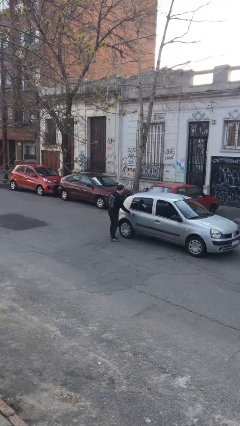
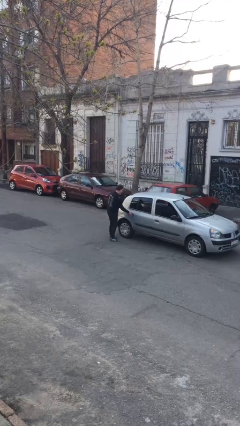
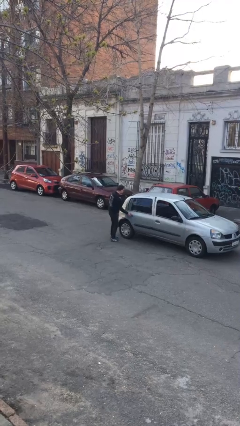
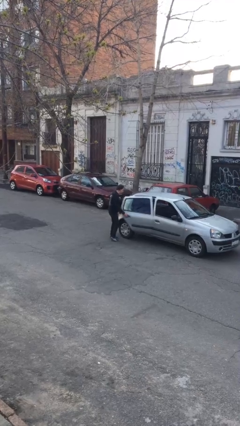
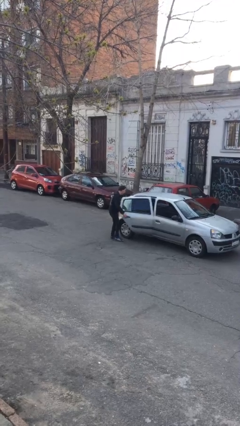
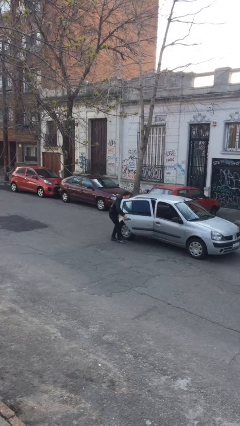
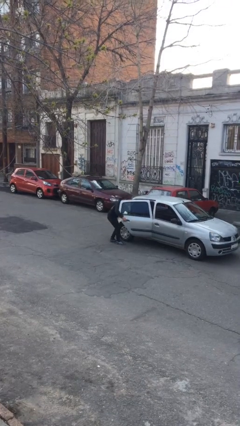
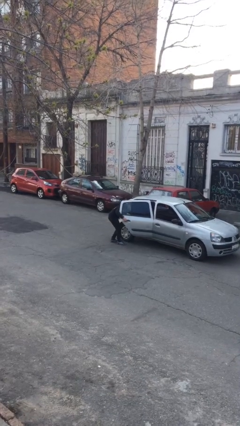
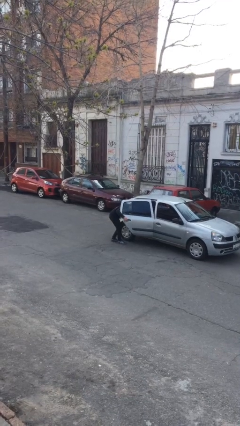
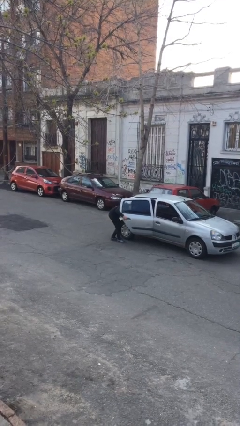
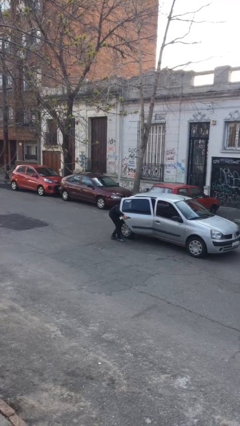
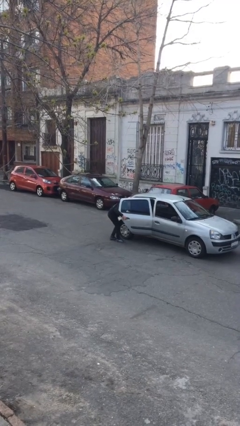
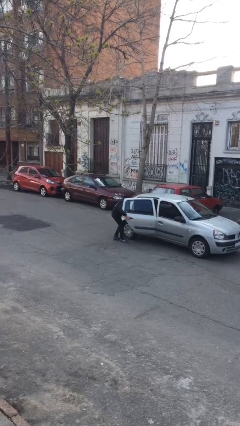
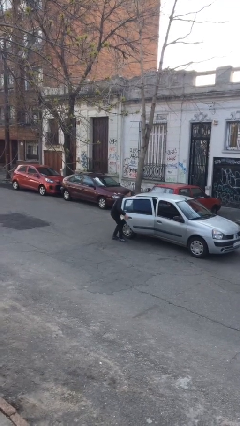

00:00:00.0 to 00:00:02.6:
person opens car door

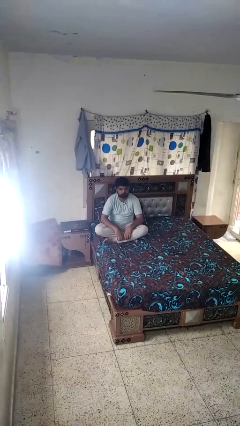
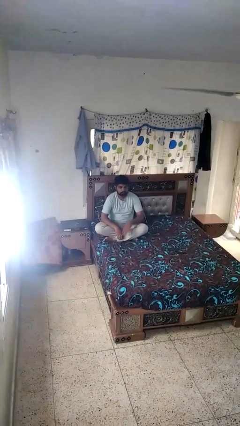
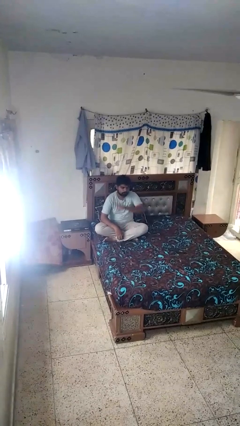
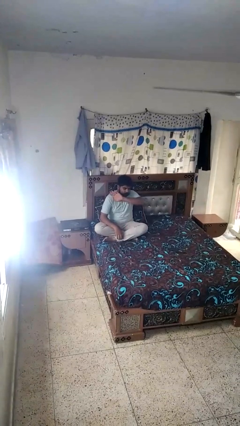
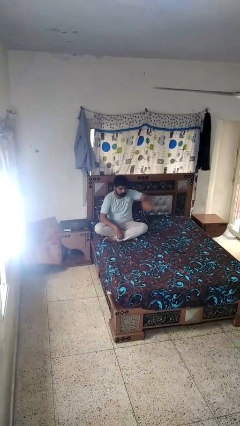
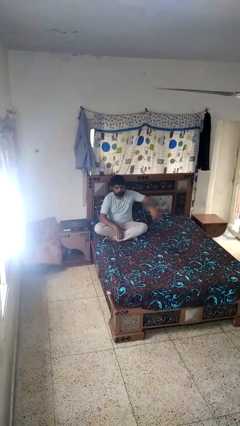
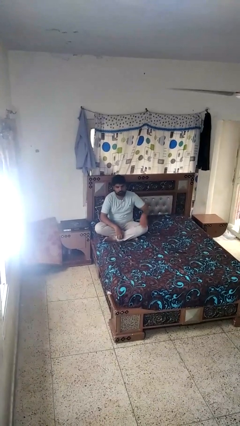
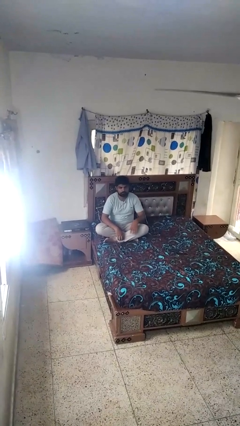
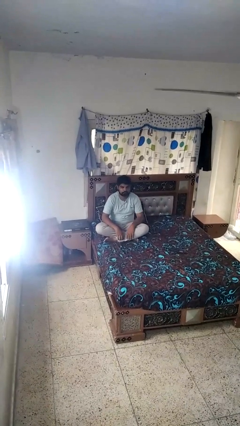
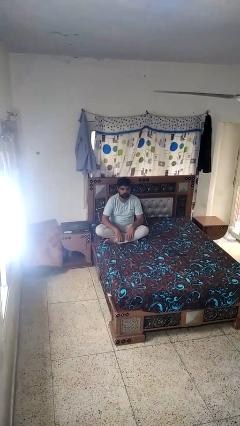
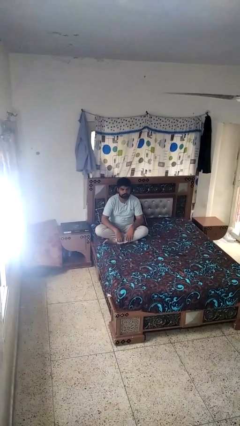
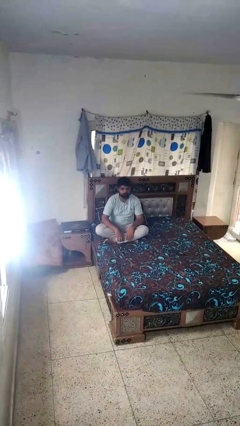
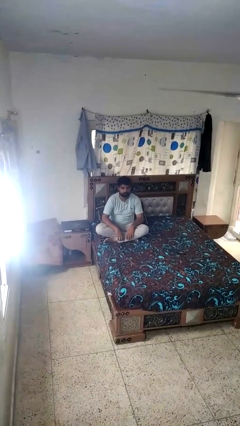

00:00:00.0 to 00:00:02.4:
person gestures swipe left

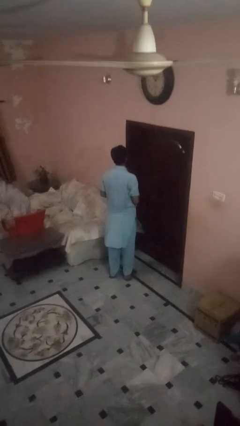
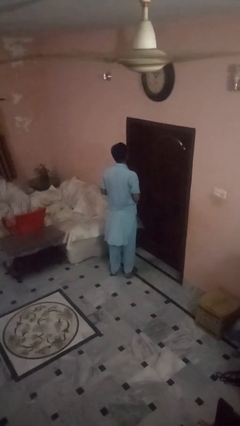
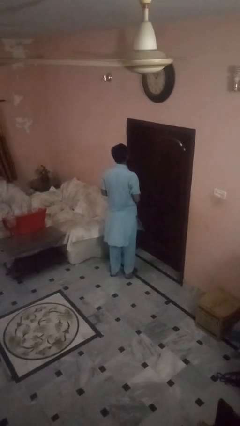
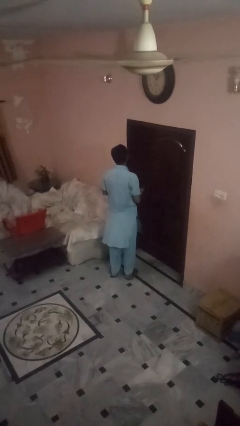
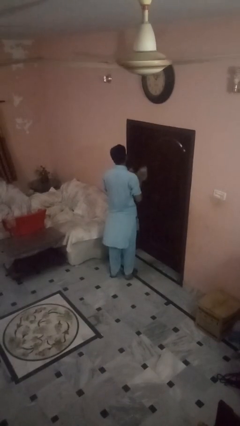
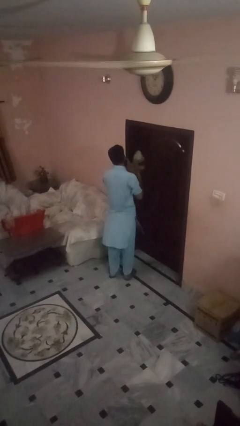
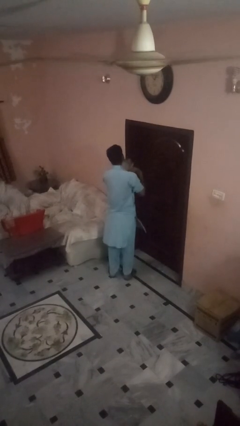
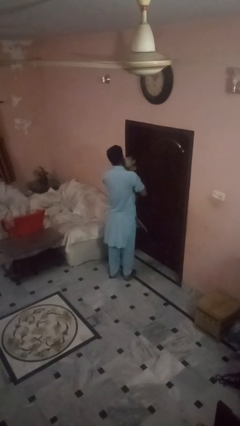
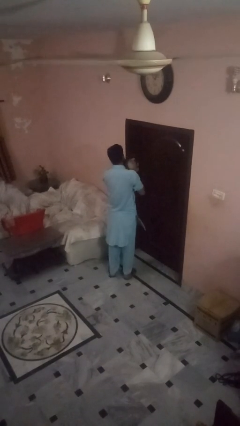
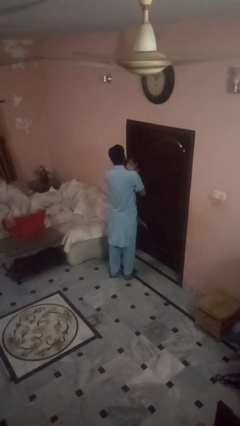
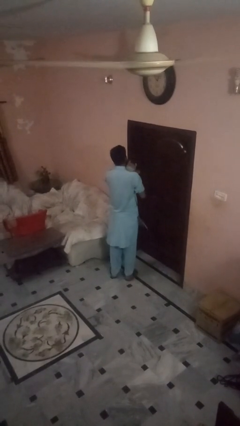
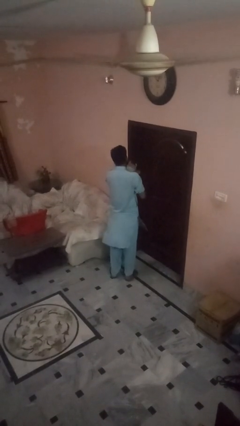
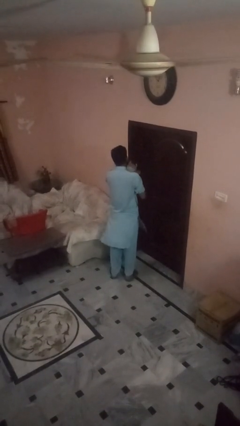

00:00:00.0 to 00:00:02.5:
person hugs stuffed animal

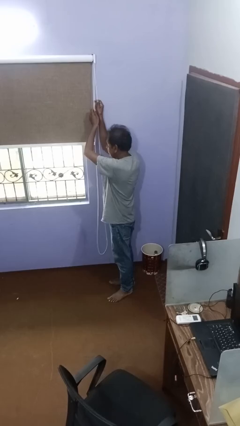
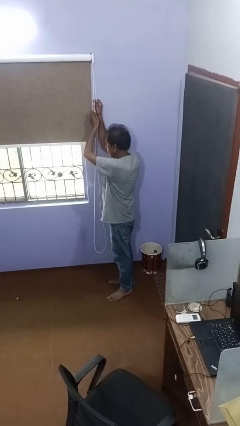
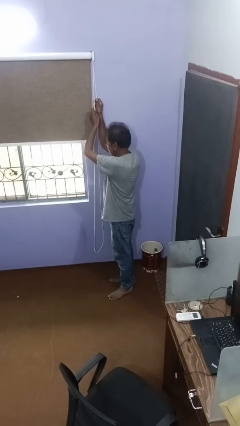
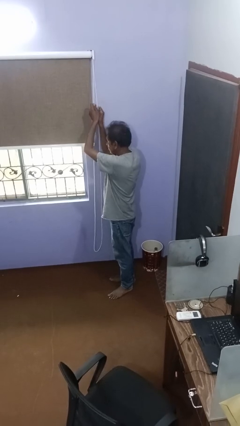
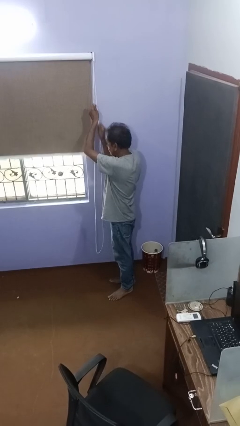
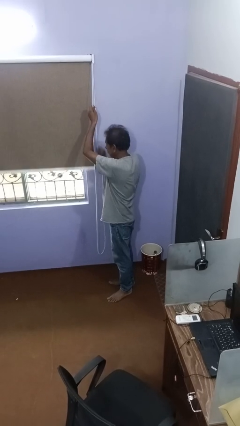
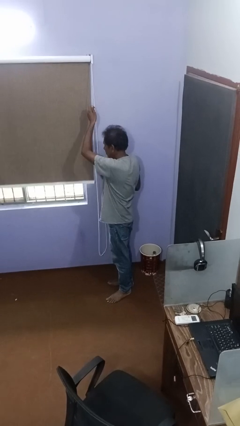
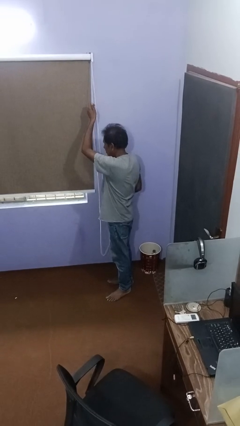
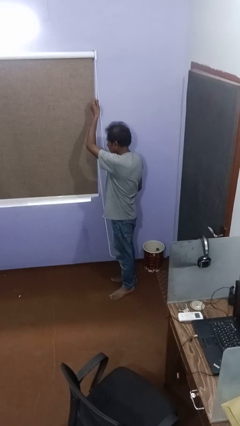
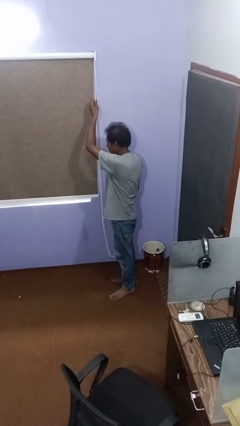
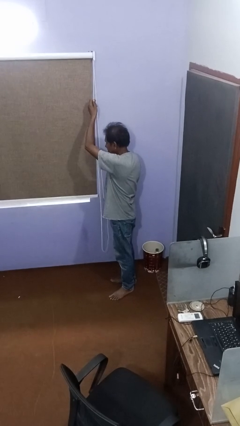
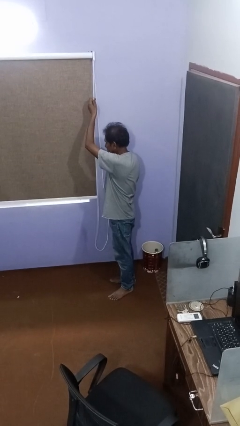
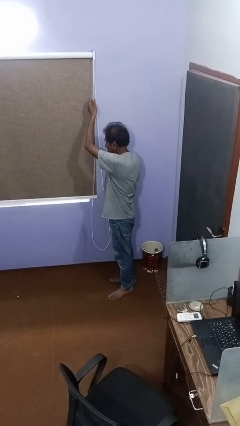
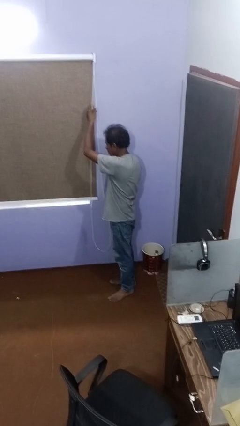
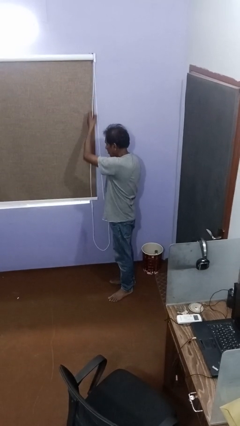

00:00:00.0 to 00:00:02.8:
person closes curtains

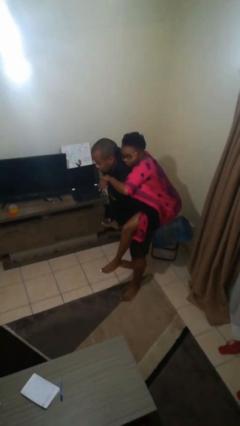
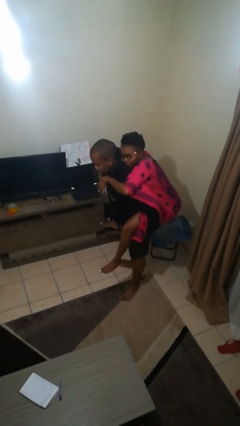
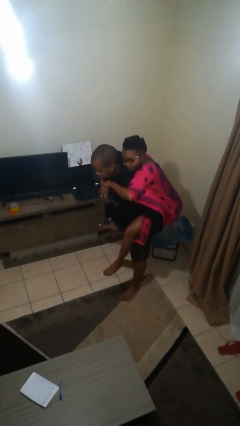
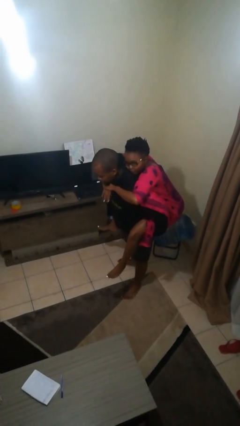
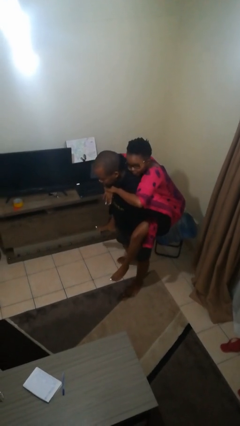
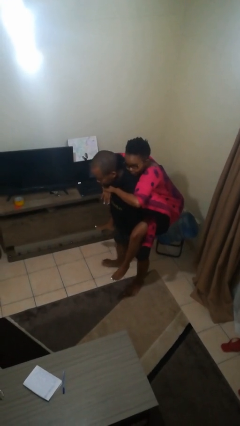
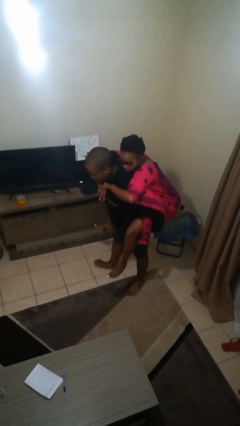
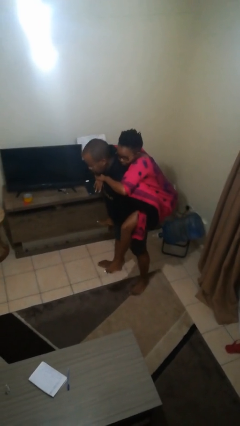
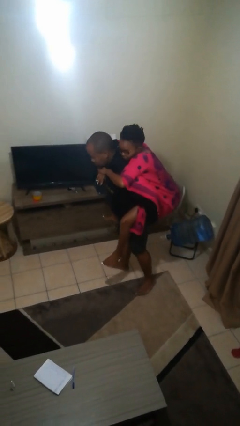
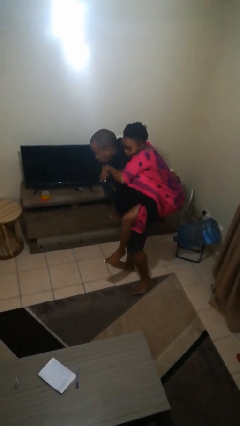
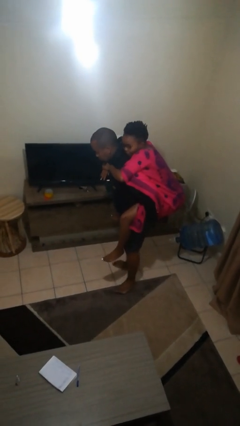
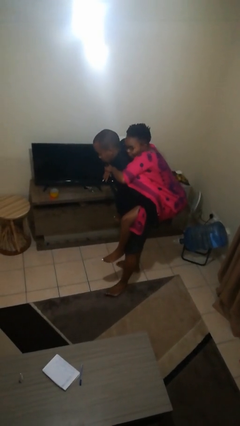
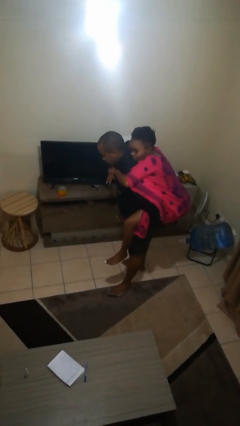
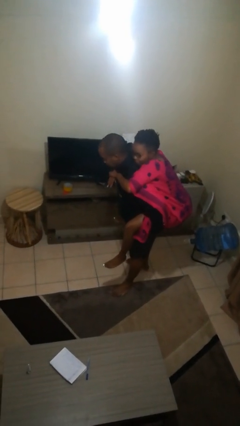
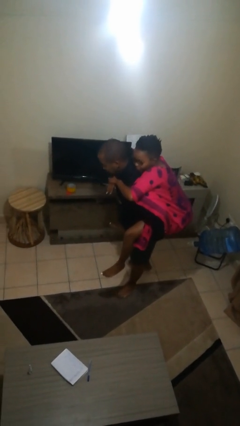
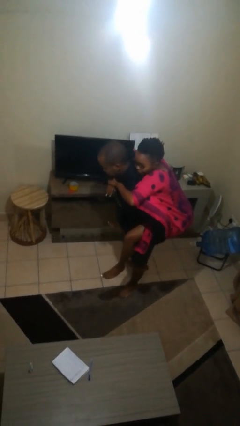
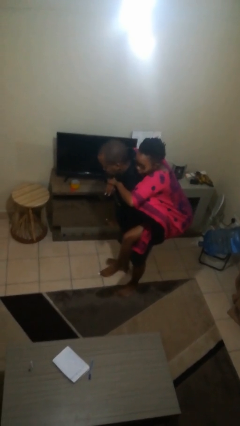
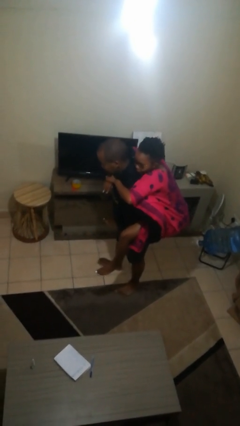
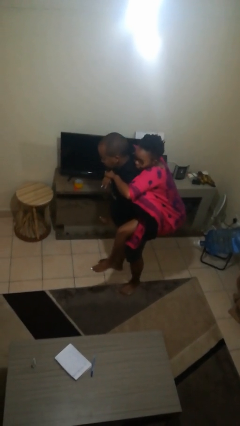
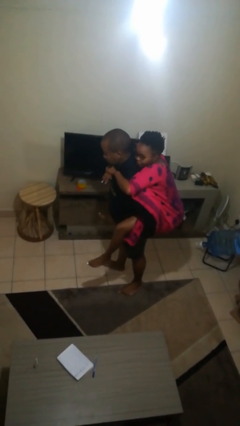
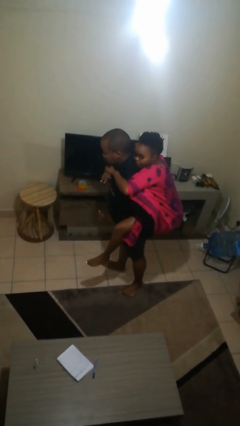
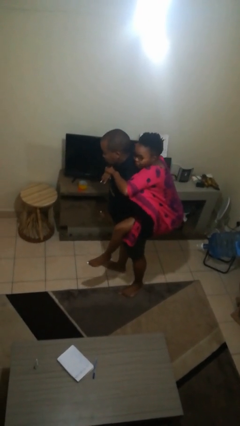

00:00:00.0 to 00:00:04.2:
person carries person on back

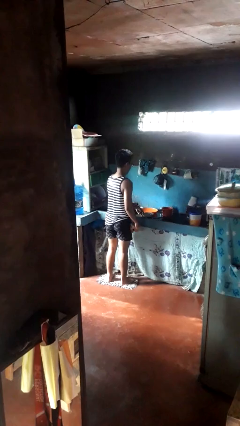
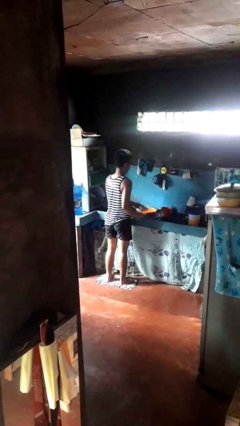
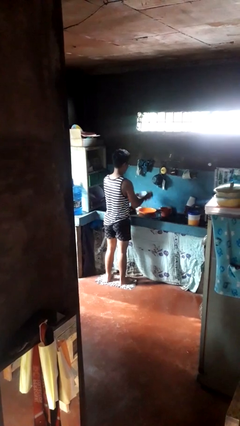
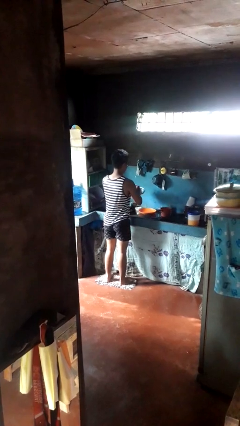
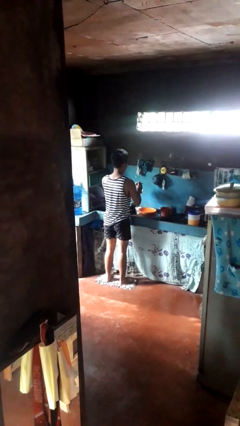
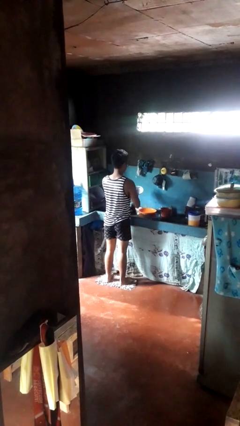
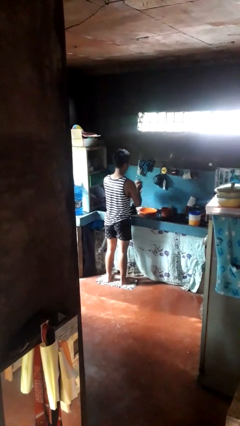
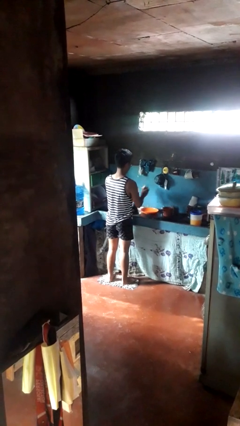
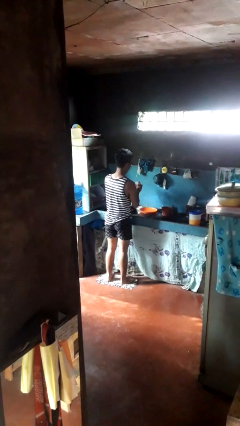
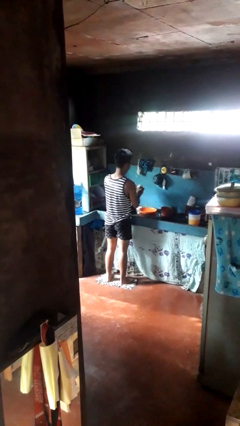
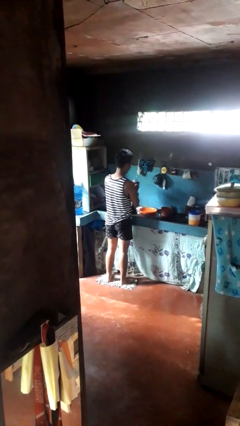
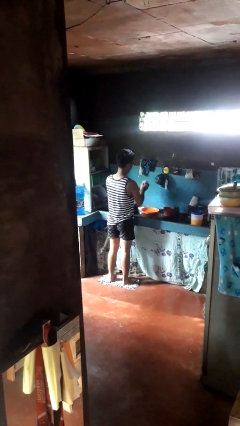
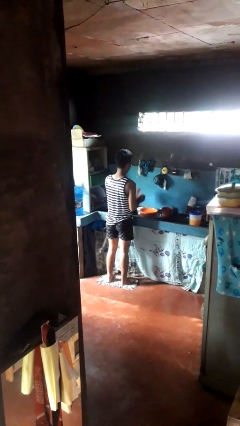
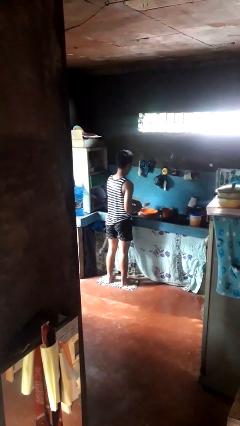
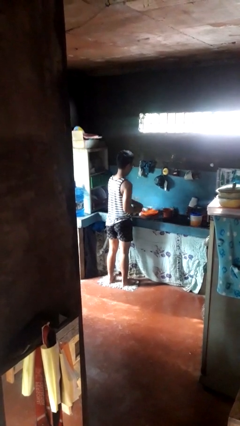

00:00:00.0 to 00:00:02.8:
person dries dish
